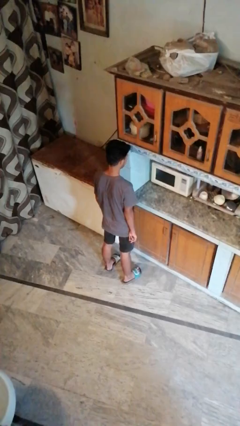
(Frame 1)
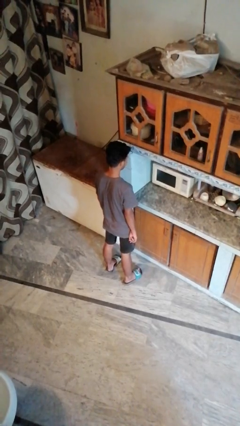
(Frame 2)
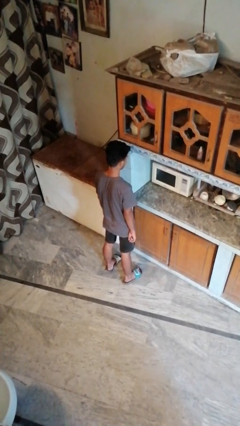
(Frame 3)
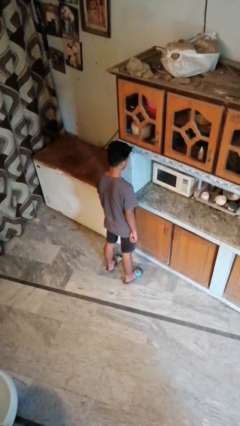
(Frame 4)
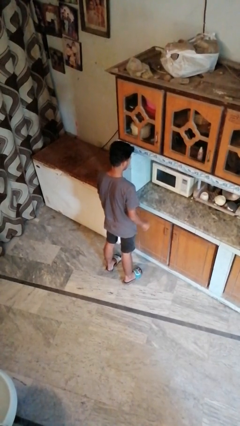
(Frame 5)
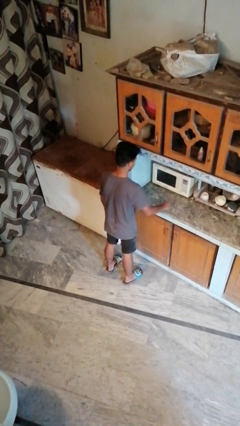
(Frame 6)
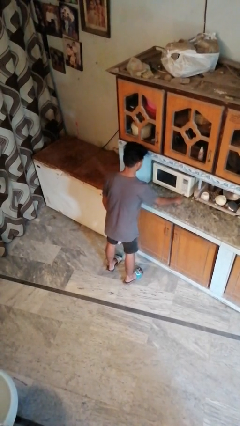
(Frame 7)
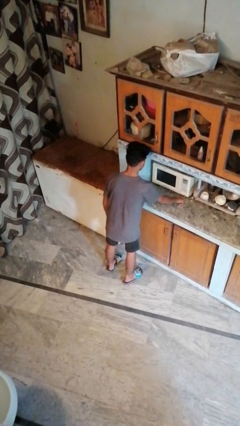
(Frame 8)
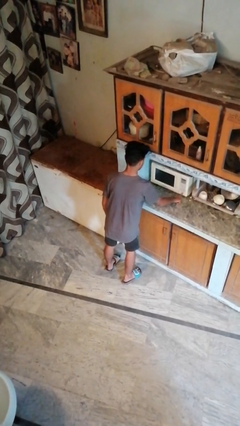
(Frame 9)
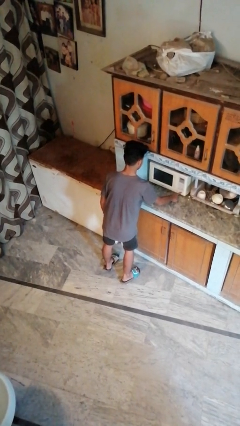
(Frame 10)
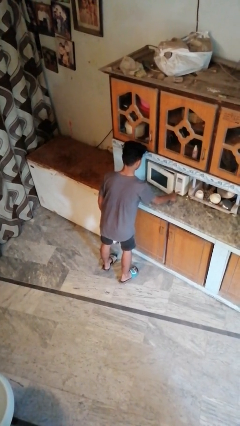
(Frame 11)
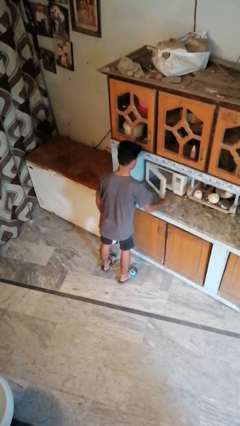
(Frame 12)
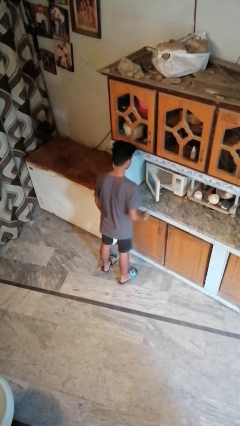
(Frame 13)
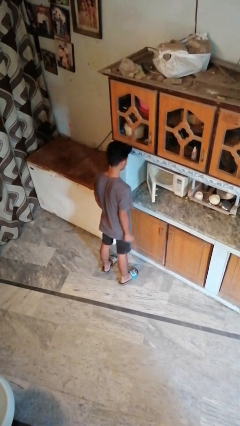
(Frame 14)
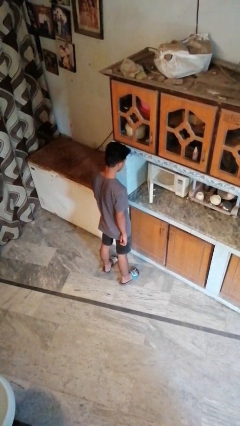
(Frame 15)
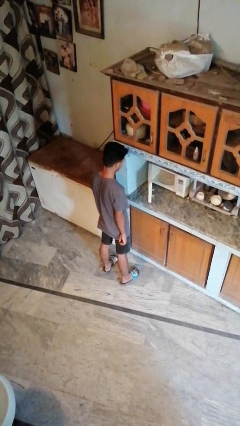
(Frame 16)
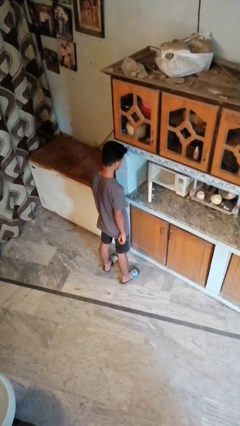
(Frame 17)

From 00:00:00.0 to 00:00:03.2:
person opens oven door

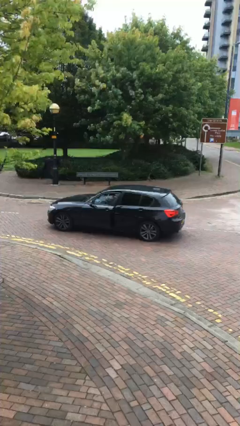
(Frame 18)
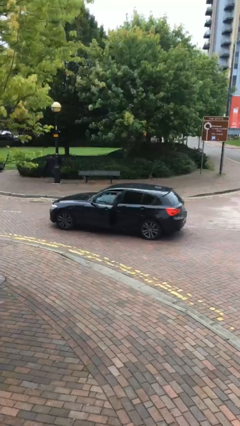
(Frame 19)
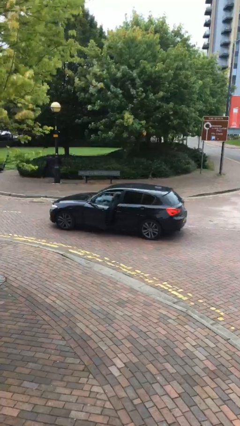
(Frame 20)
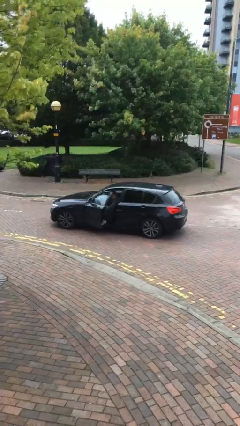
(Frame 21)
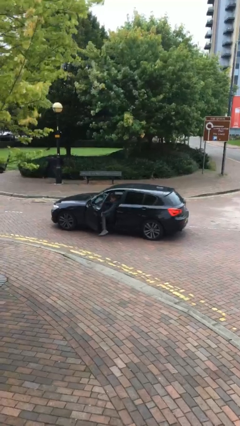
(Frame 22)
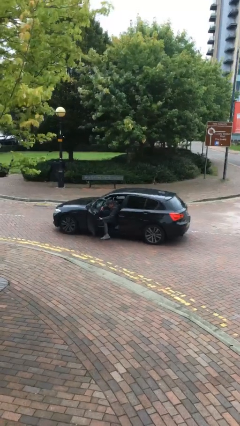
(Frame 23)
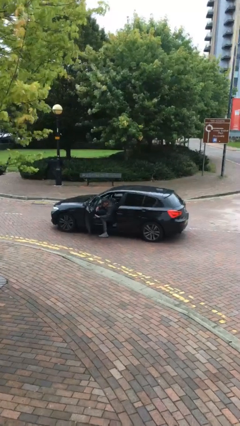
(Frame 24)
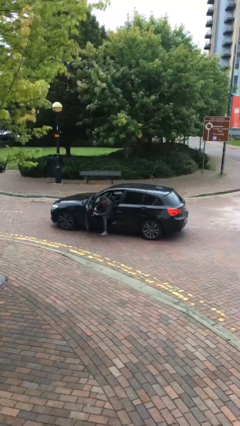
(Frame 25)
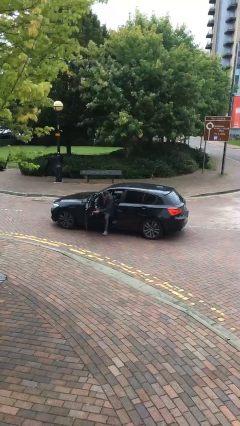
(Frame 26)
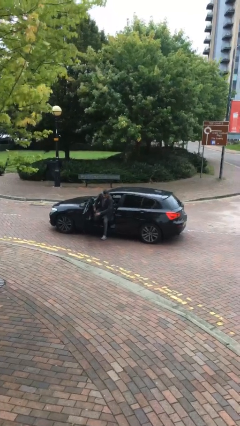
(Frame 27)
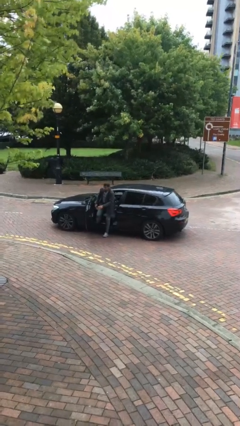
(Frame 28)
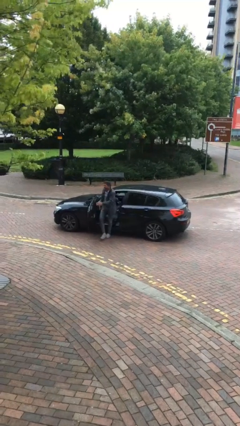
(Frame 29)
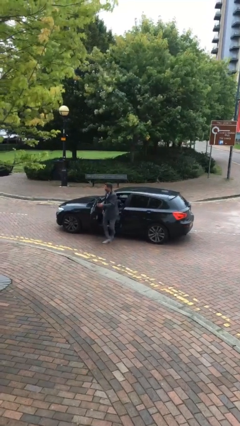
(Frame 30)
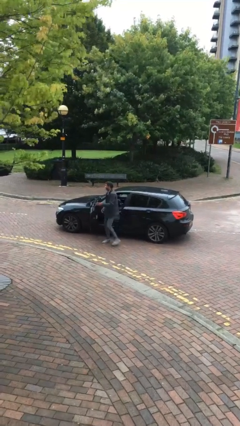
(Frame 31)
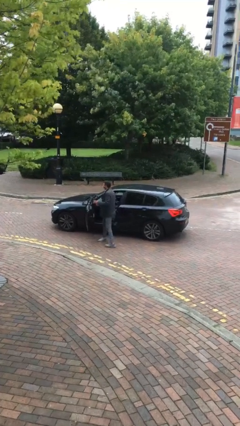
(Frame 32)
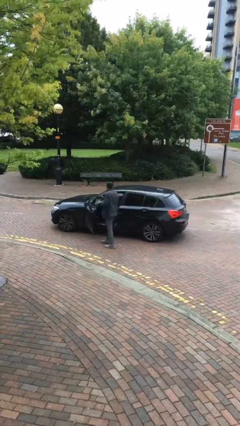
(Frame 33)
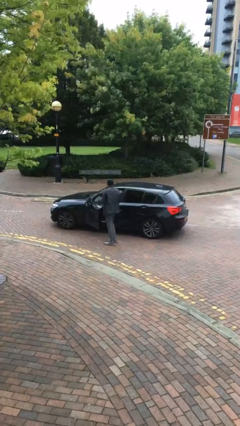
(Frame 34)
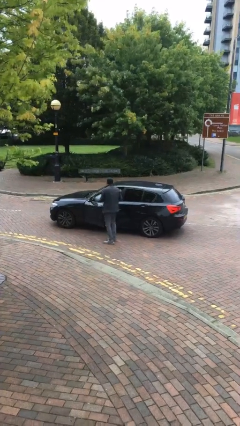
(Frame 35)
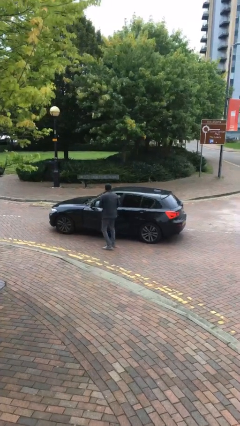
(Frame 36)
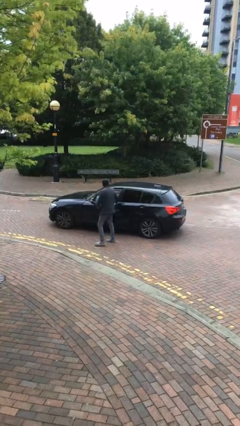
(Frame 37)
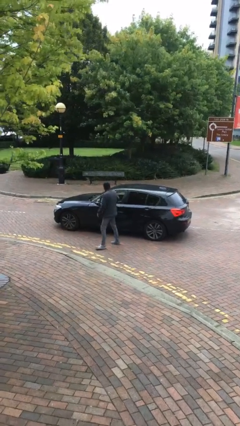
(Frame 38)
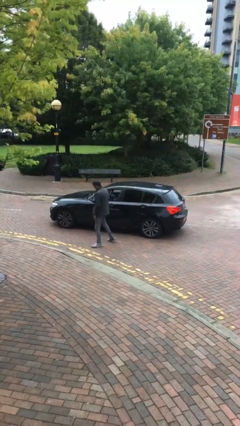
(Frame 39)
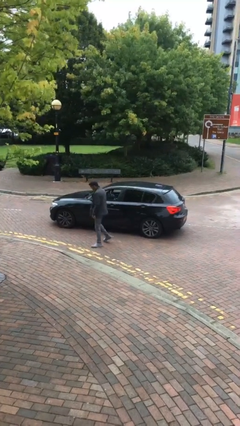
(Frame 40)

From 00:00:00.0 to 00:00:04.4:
car drops off person

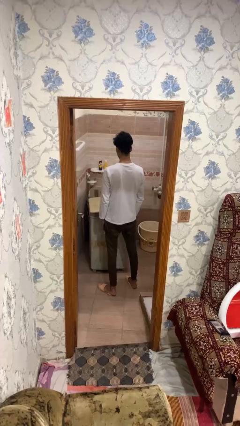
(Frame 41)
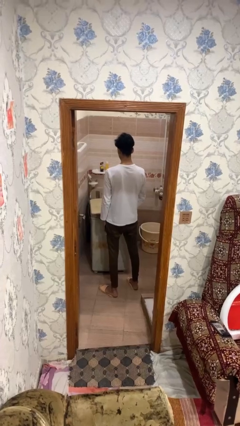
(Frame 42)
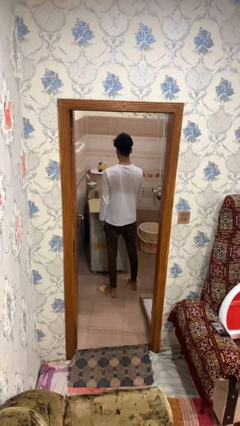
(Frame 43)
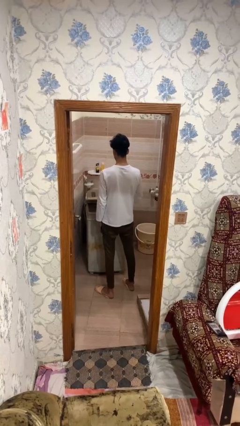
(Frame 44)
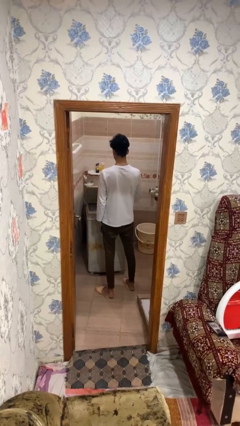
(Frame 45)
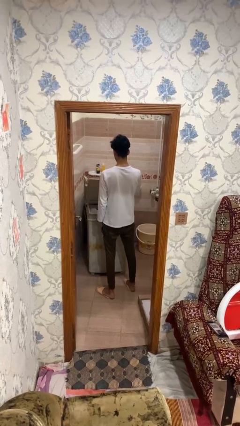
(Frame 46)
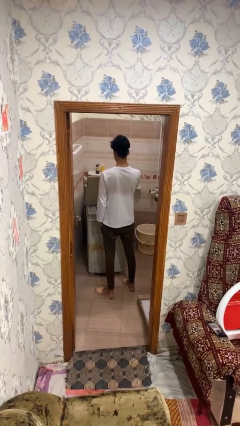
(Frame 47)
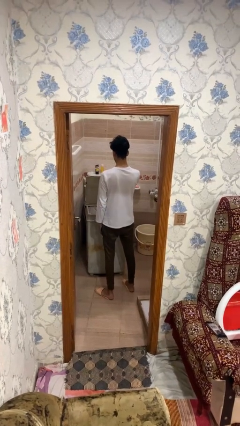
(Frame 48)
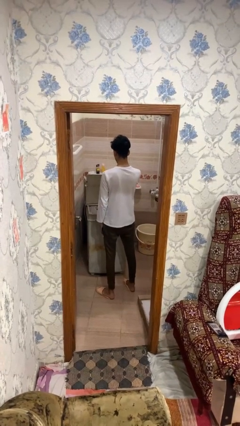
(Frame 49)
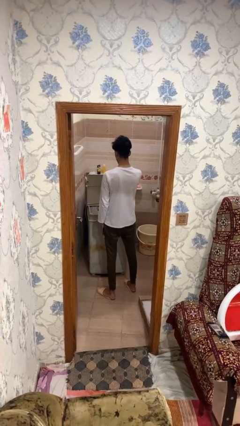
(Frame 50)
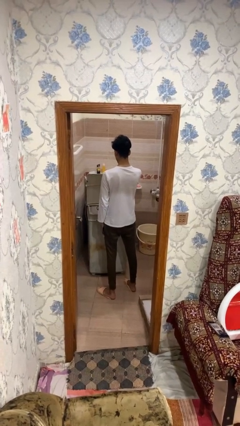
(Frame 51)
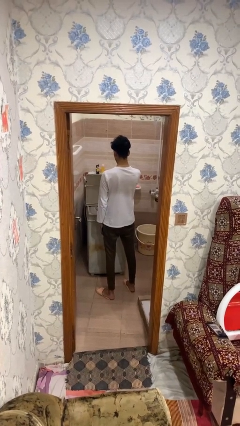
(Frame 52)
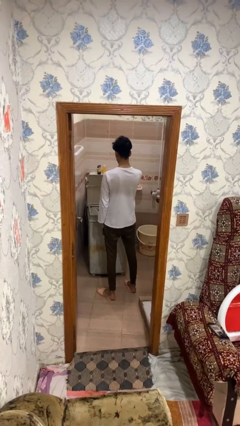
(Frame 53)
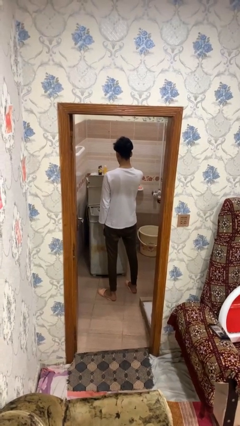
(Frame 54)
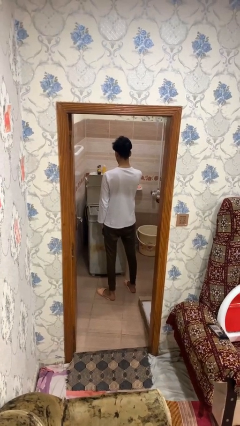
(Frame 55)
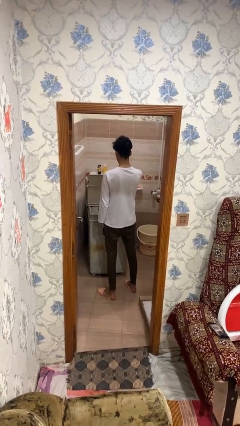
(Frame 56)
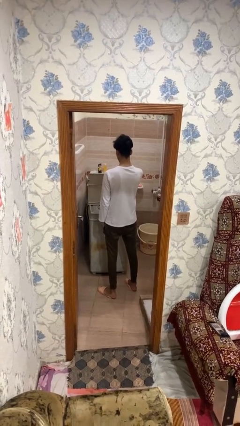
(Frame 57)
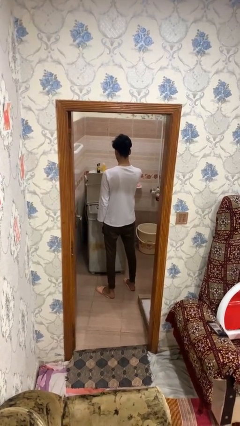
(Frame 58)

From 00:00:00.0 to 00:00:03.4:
person opens clothes washer

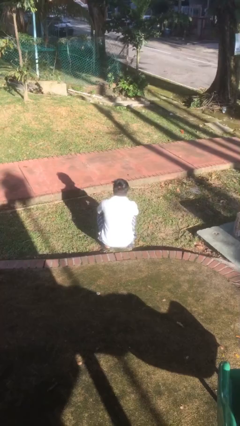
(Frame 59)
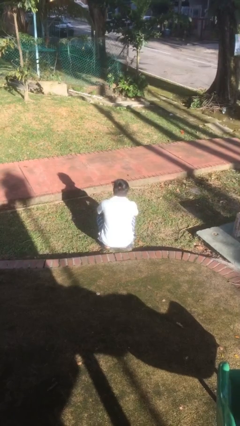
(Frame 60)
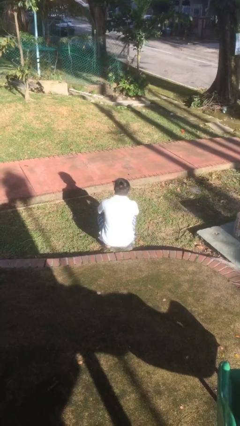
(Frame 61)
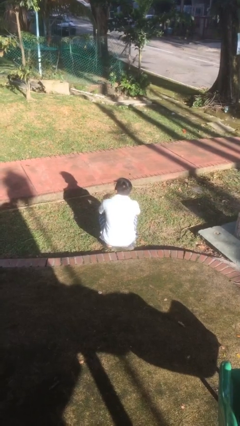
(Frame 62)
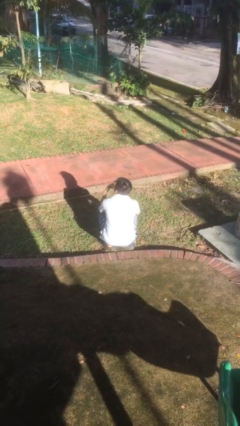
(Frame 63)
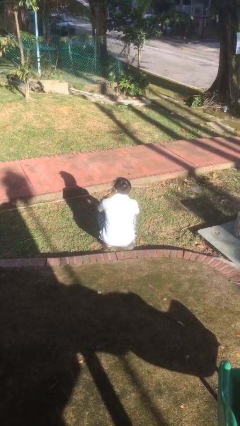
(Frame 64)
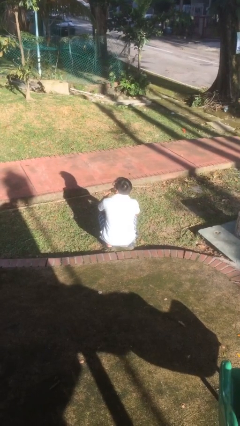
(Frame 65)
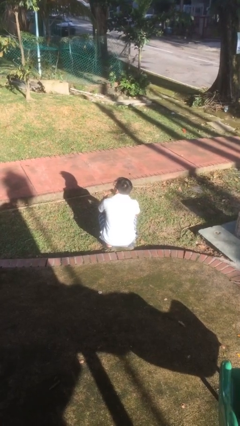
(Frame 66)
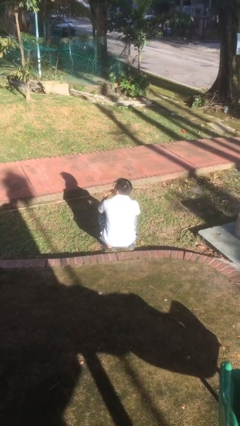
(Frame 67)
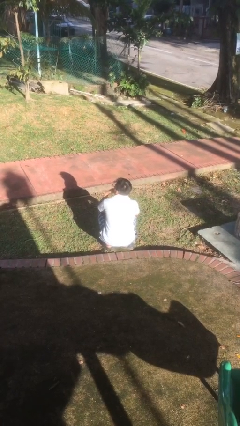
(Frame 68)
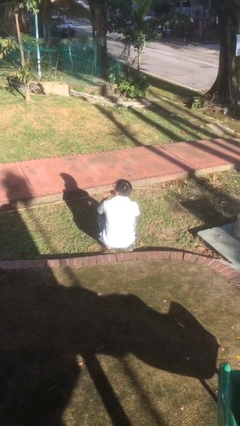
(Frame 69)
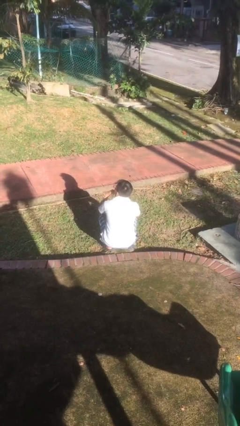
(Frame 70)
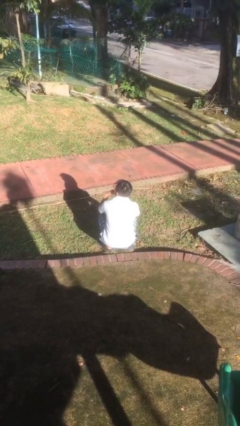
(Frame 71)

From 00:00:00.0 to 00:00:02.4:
person strokes chin

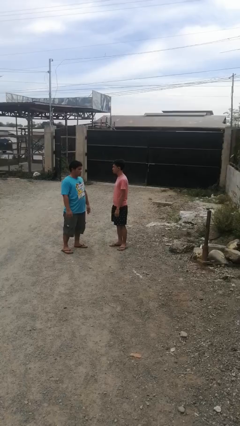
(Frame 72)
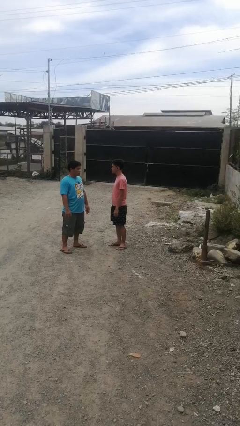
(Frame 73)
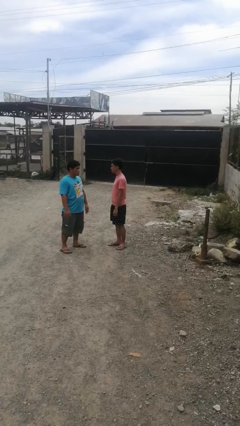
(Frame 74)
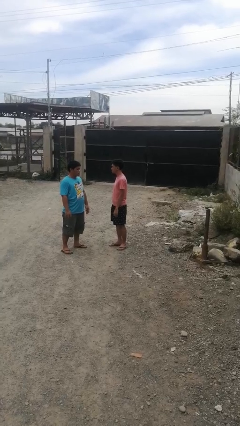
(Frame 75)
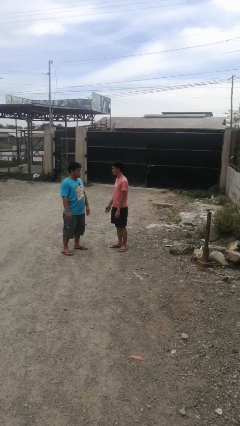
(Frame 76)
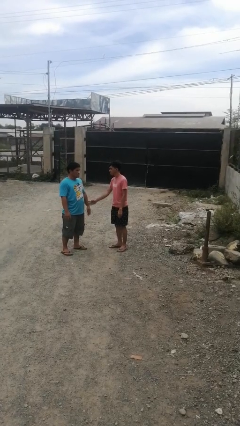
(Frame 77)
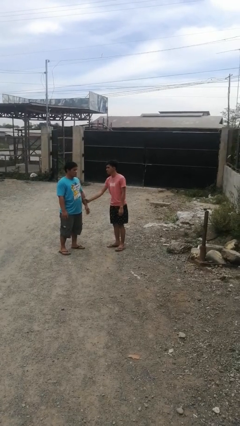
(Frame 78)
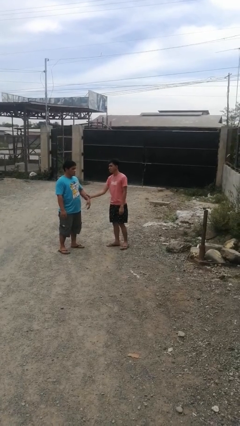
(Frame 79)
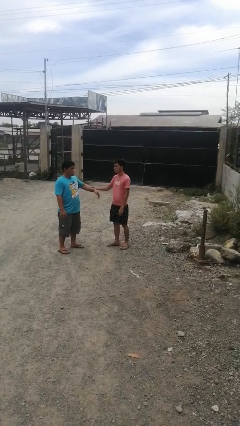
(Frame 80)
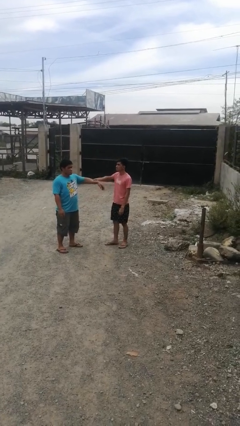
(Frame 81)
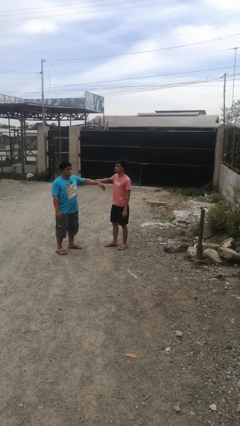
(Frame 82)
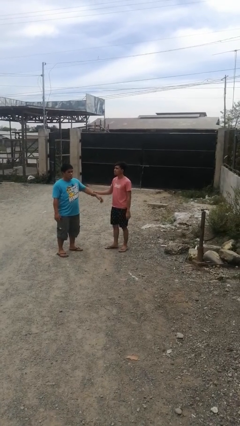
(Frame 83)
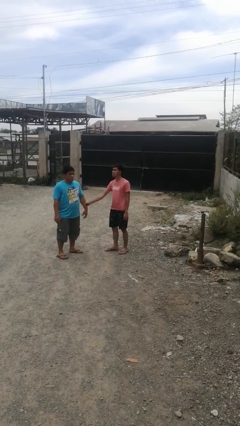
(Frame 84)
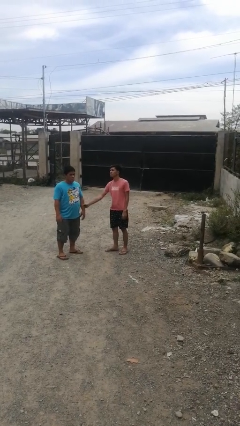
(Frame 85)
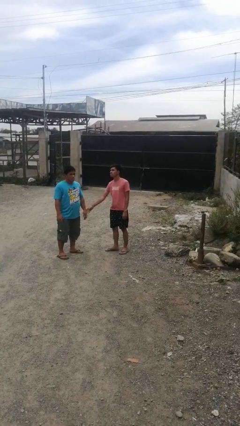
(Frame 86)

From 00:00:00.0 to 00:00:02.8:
person grabs person by forearm

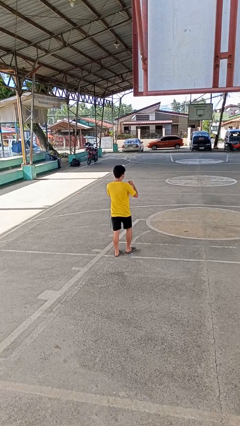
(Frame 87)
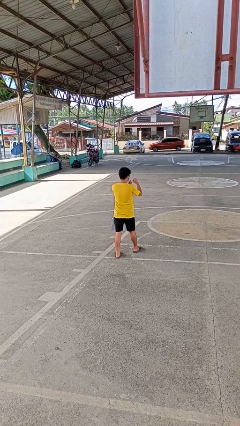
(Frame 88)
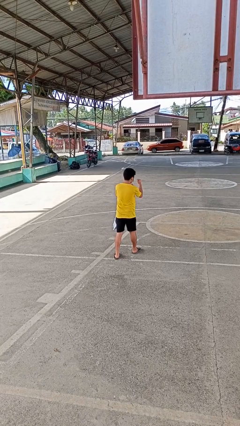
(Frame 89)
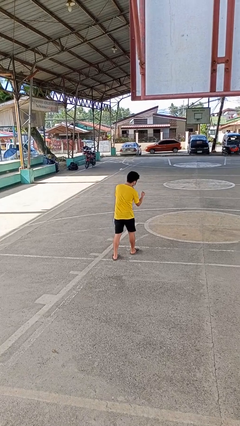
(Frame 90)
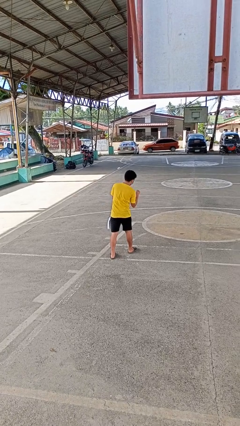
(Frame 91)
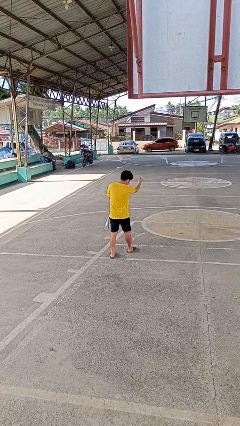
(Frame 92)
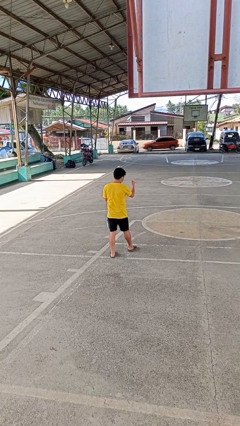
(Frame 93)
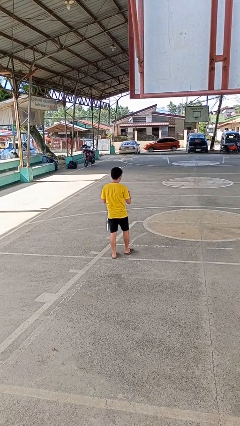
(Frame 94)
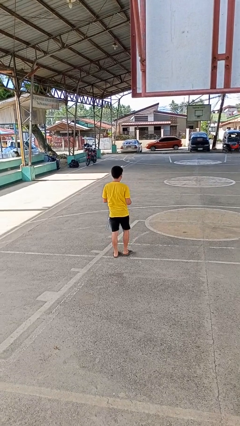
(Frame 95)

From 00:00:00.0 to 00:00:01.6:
person punches
